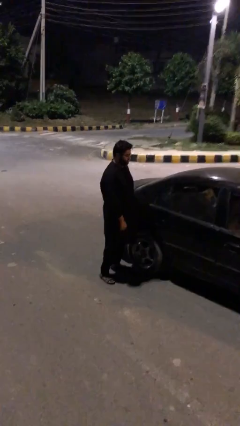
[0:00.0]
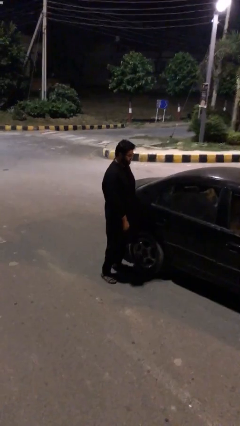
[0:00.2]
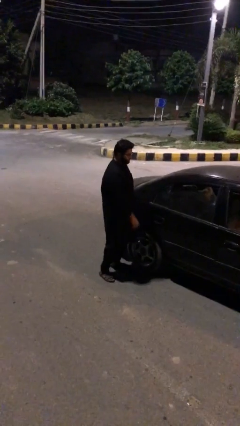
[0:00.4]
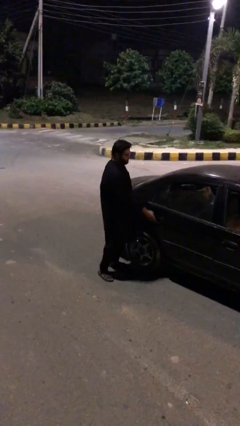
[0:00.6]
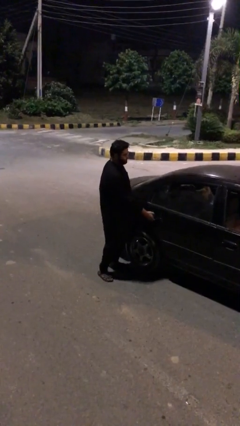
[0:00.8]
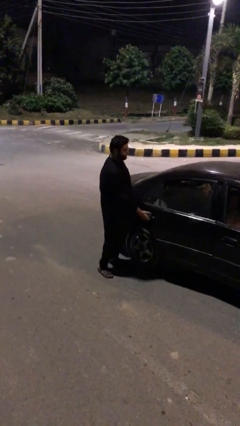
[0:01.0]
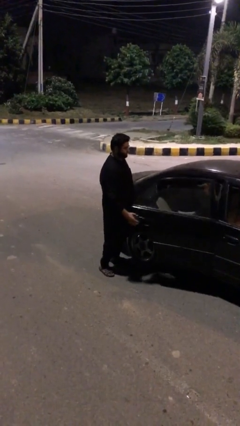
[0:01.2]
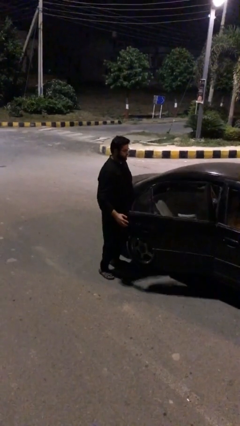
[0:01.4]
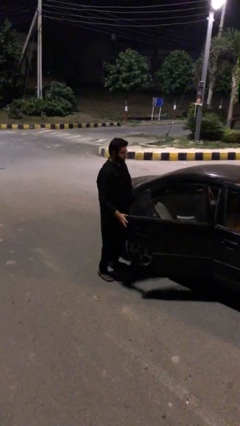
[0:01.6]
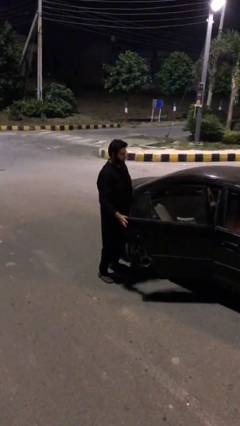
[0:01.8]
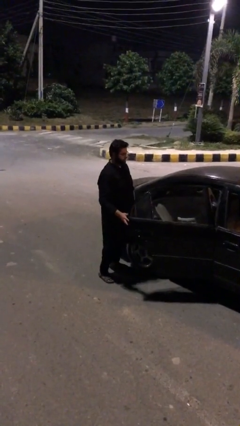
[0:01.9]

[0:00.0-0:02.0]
person opens car door

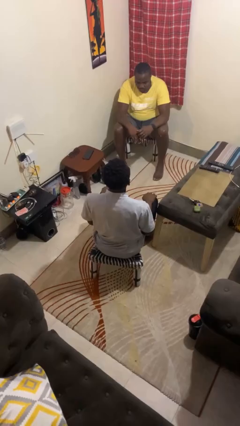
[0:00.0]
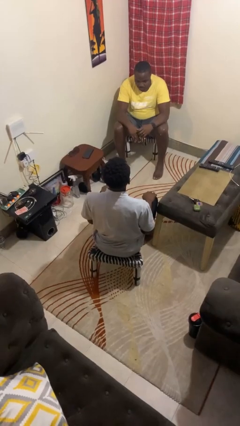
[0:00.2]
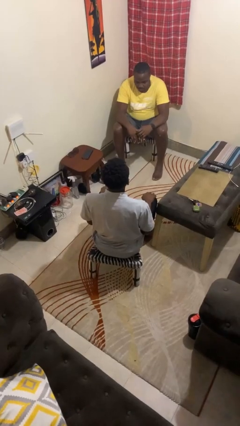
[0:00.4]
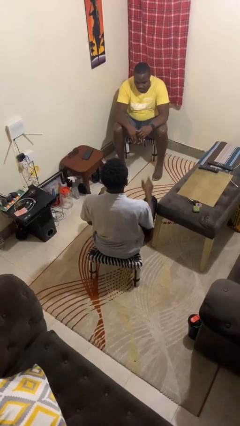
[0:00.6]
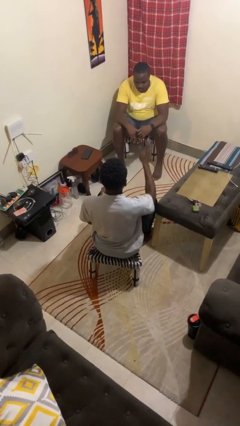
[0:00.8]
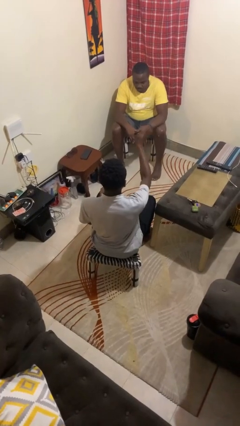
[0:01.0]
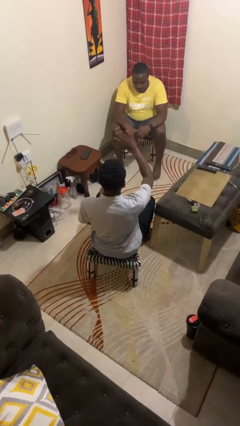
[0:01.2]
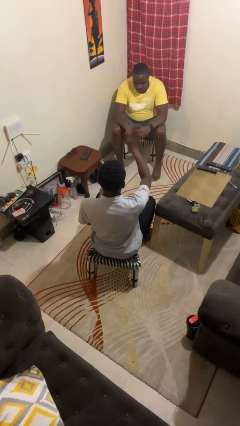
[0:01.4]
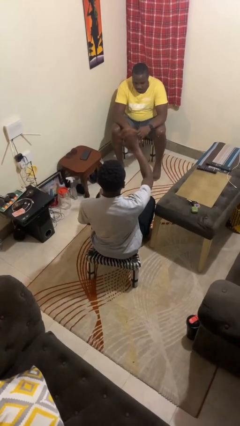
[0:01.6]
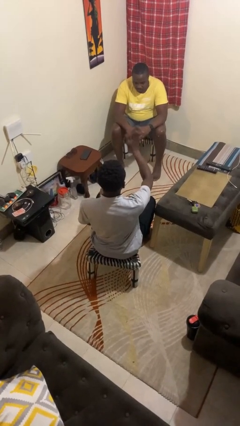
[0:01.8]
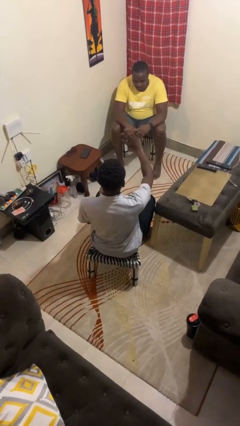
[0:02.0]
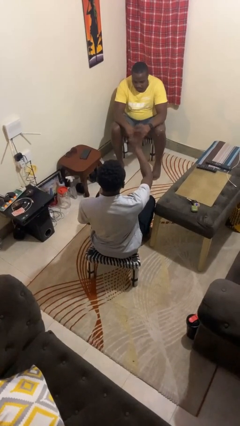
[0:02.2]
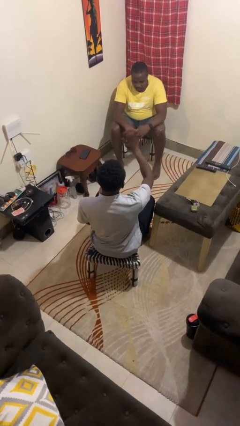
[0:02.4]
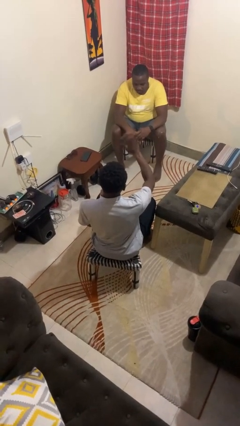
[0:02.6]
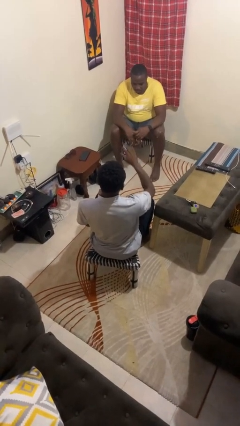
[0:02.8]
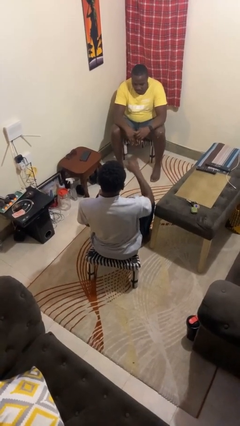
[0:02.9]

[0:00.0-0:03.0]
person waves at person

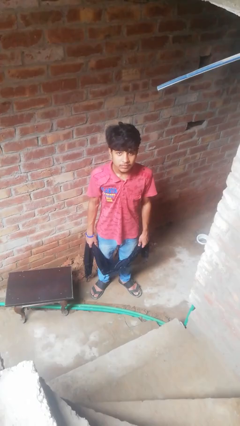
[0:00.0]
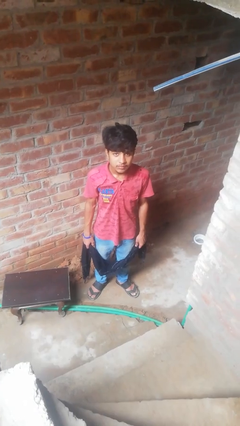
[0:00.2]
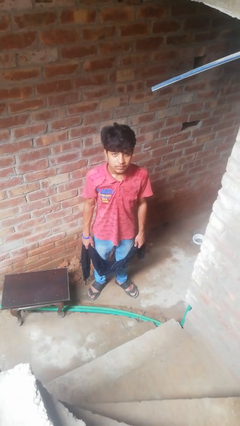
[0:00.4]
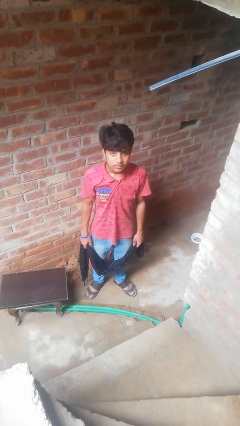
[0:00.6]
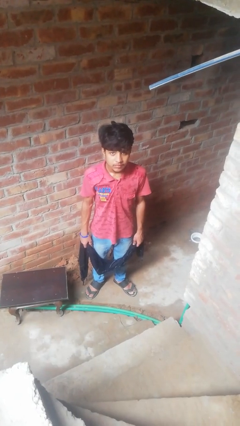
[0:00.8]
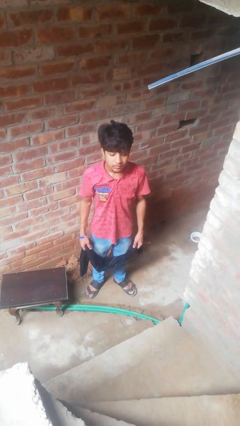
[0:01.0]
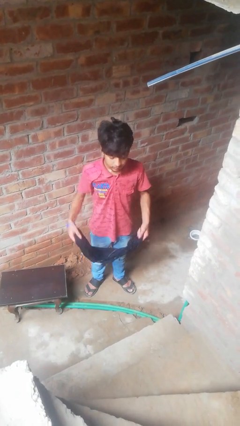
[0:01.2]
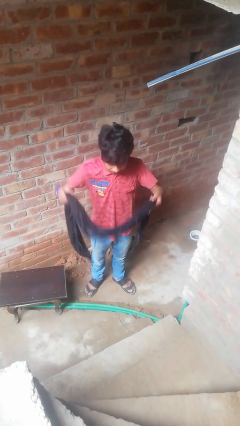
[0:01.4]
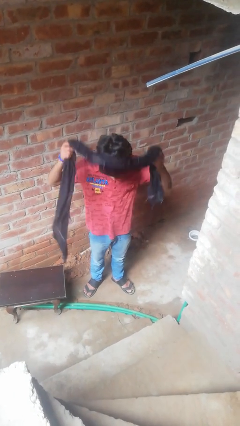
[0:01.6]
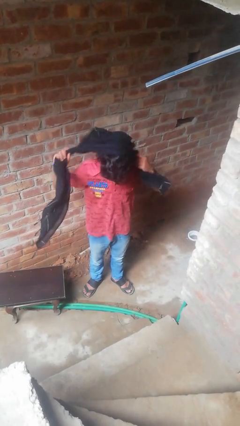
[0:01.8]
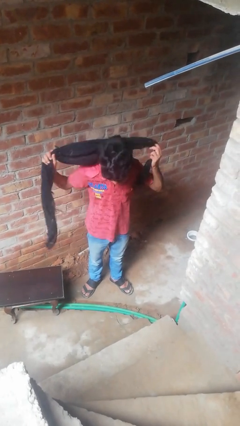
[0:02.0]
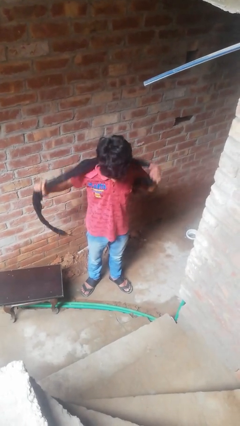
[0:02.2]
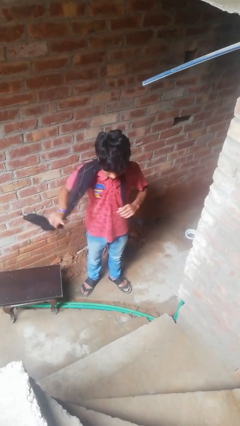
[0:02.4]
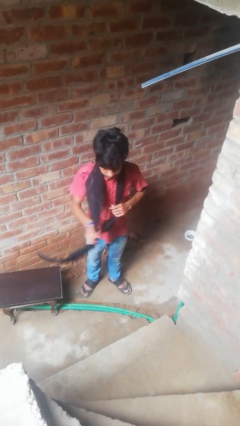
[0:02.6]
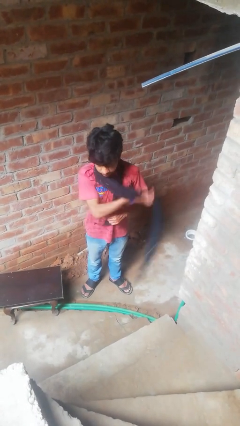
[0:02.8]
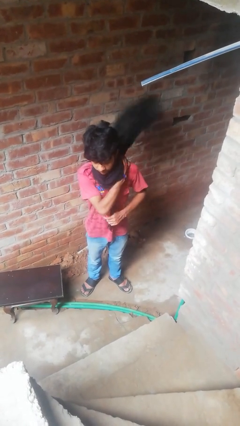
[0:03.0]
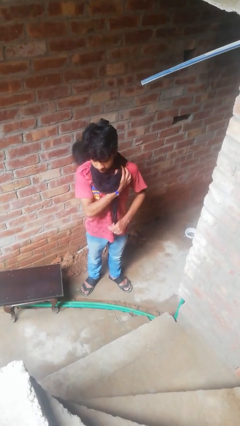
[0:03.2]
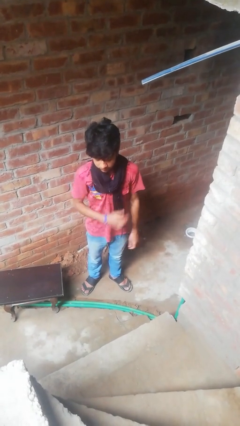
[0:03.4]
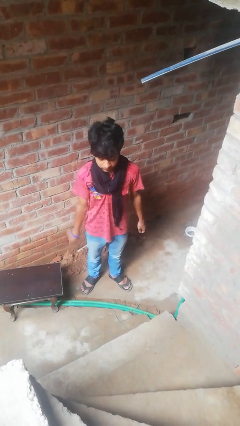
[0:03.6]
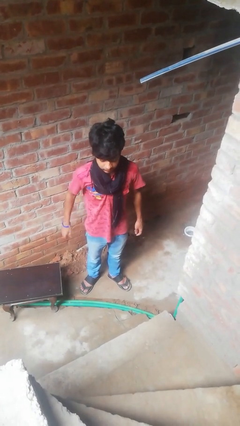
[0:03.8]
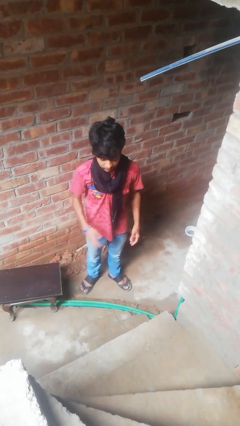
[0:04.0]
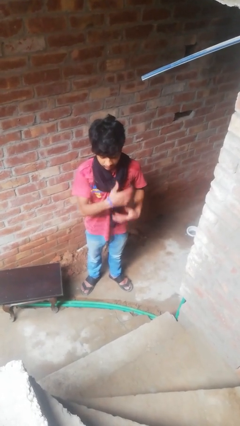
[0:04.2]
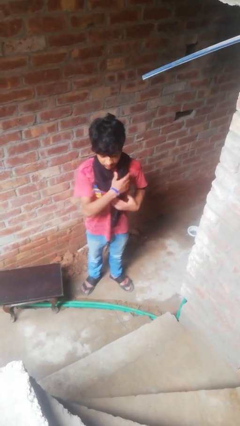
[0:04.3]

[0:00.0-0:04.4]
person puts on scarf

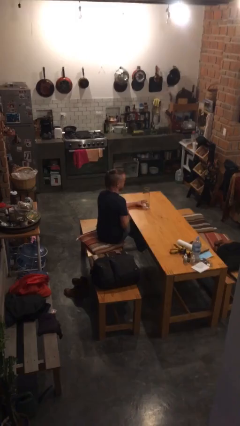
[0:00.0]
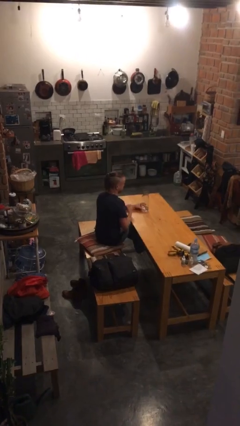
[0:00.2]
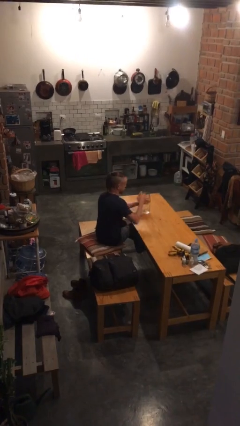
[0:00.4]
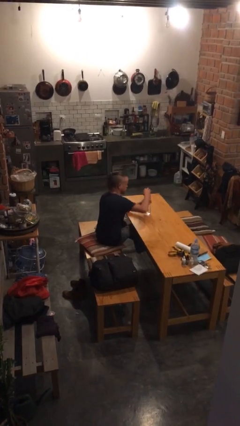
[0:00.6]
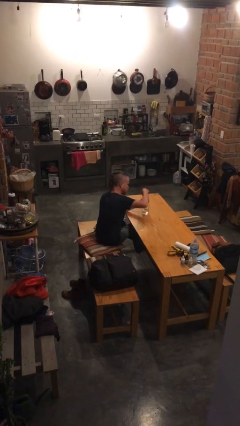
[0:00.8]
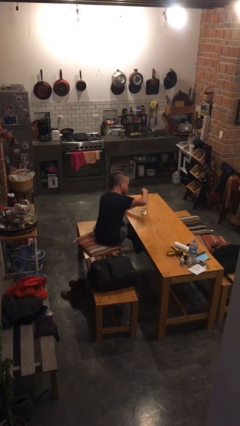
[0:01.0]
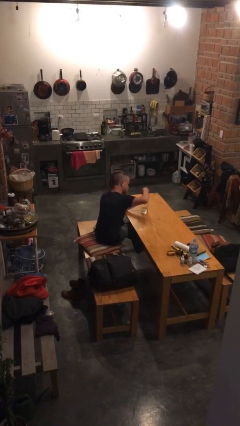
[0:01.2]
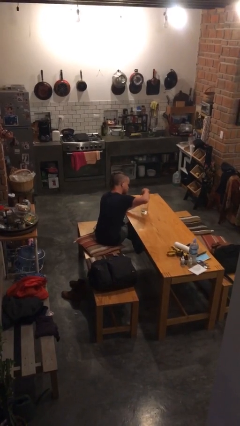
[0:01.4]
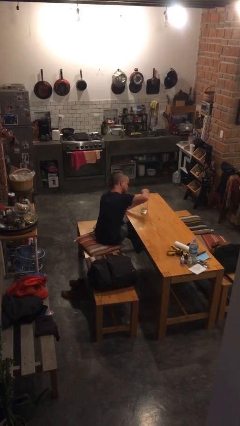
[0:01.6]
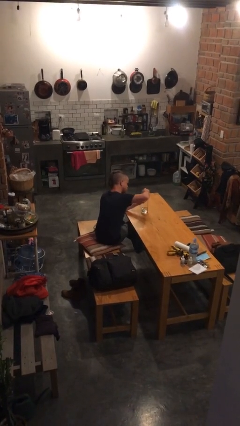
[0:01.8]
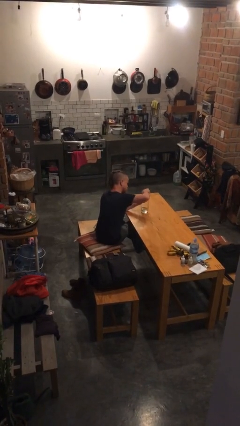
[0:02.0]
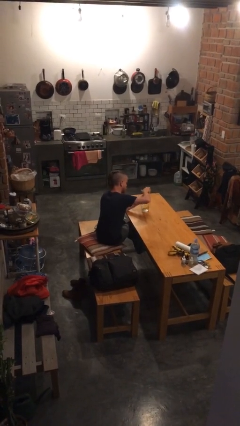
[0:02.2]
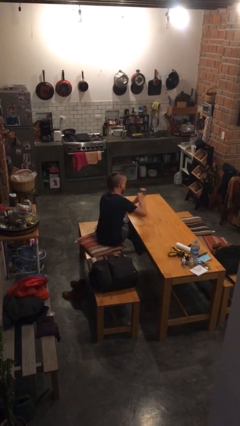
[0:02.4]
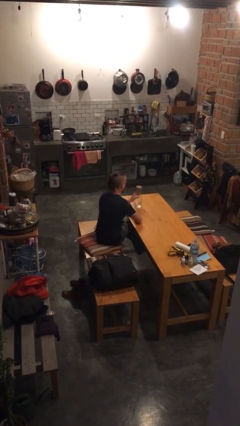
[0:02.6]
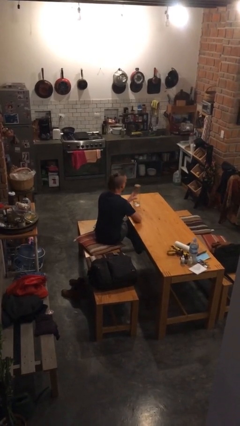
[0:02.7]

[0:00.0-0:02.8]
person closes jar

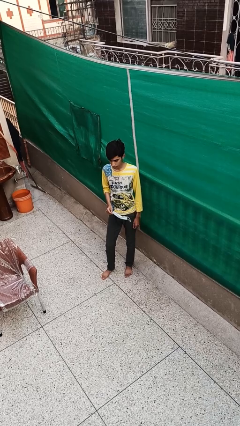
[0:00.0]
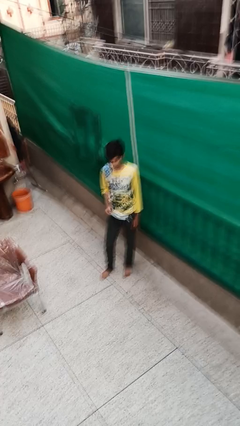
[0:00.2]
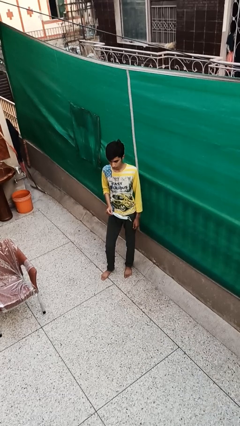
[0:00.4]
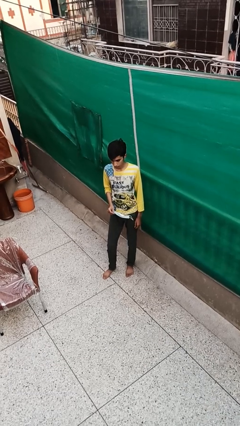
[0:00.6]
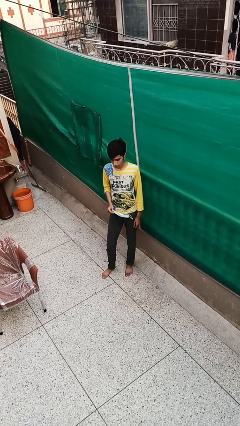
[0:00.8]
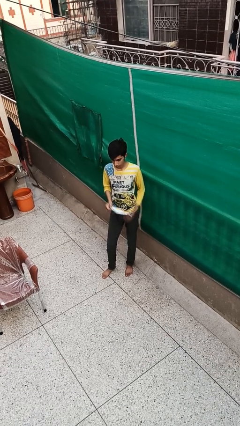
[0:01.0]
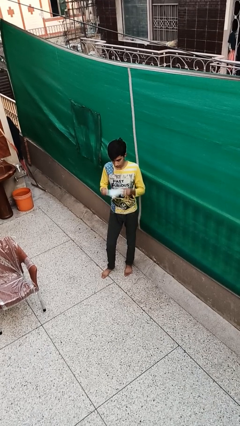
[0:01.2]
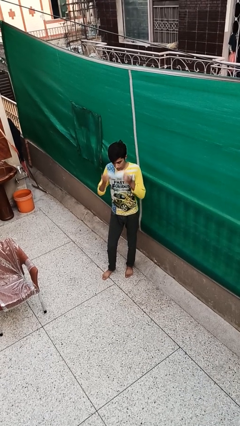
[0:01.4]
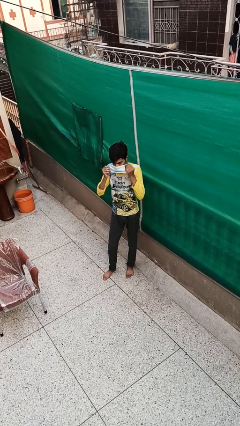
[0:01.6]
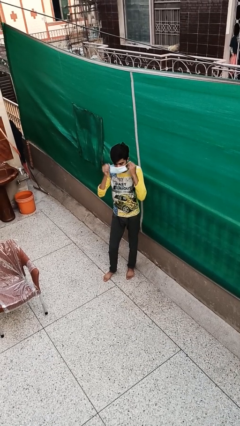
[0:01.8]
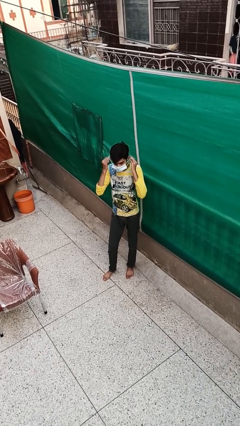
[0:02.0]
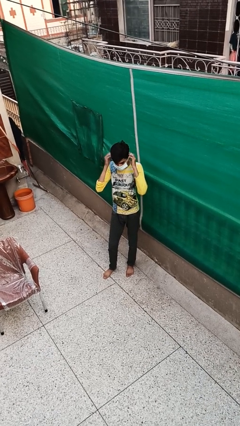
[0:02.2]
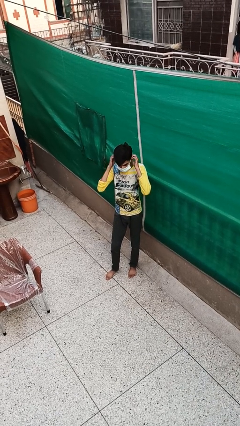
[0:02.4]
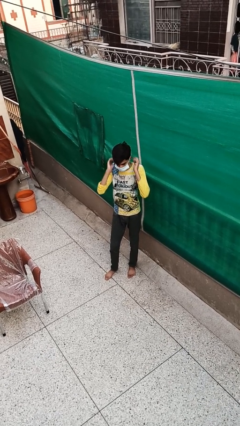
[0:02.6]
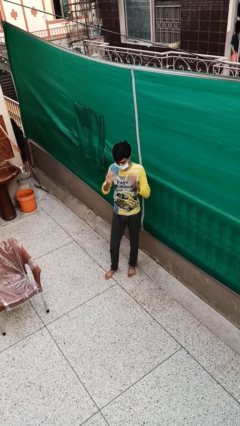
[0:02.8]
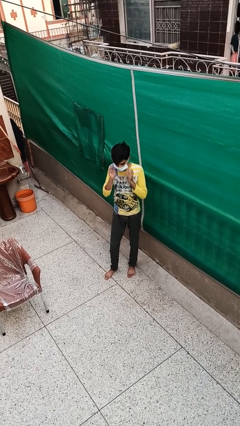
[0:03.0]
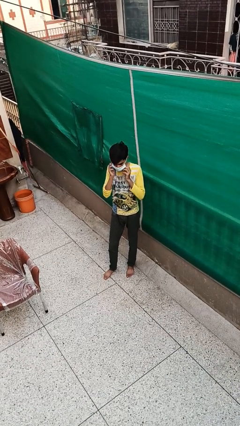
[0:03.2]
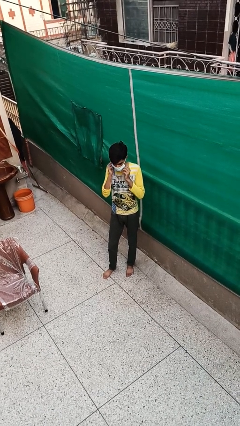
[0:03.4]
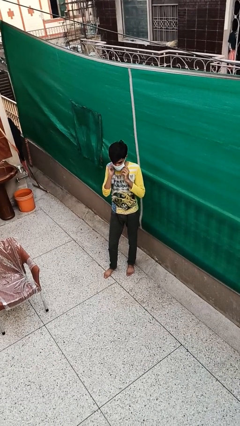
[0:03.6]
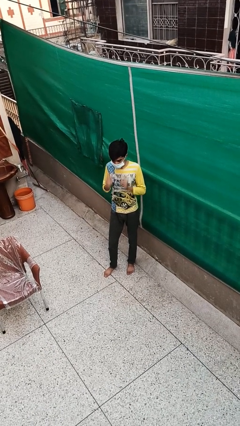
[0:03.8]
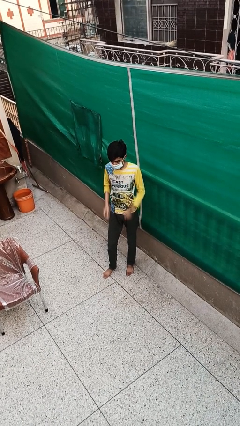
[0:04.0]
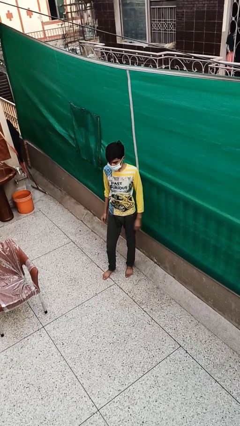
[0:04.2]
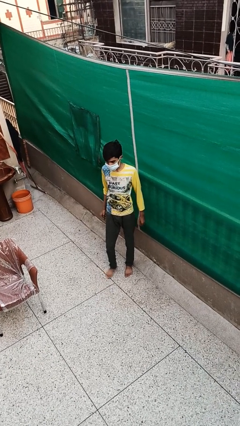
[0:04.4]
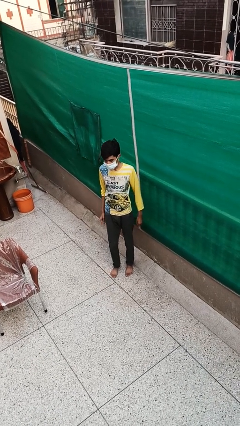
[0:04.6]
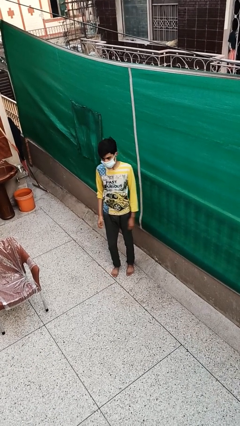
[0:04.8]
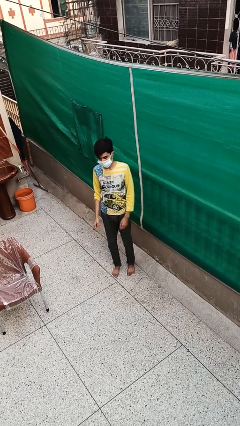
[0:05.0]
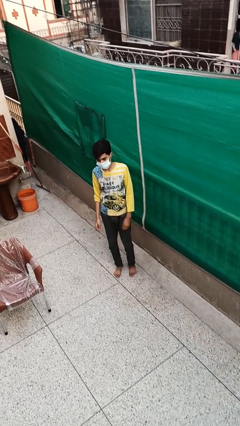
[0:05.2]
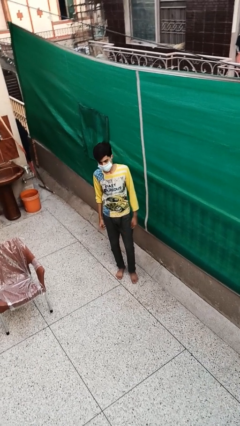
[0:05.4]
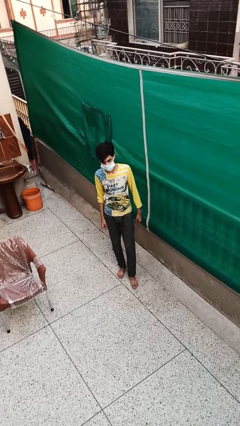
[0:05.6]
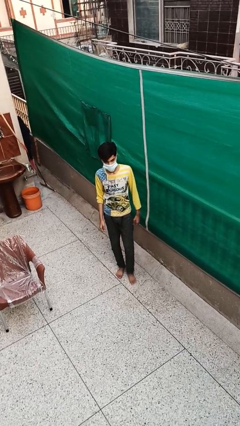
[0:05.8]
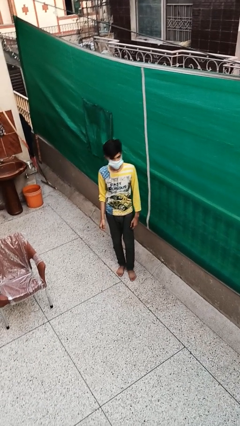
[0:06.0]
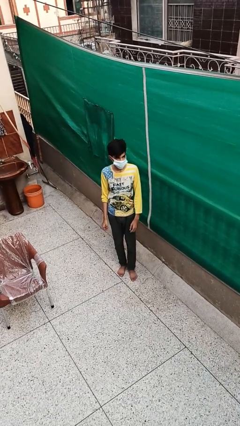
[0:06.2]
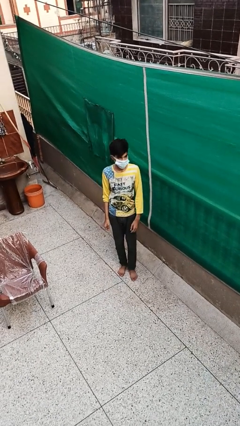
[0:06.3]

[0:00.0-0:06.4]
person puts on facemask
